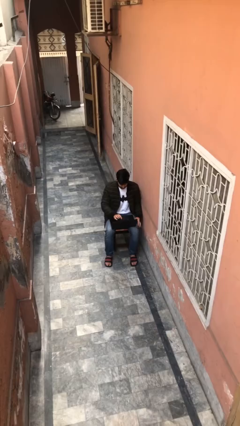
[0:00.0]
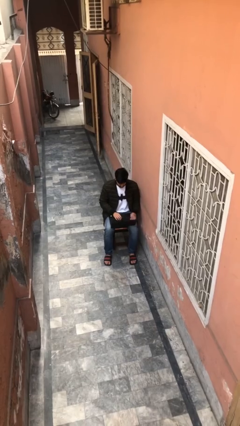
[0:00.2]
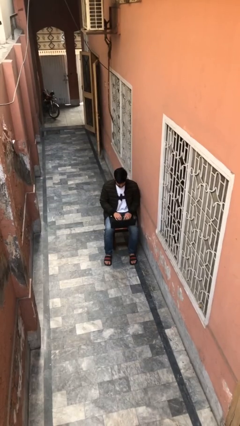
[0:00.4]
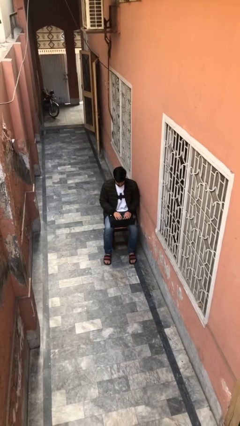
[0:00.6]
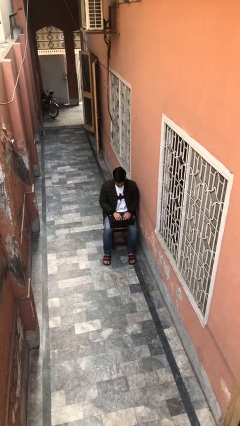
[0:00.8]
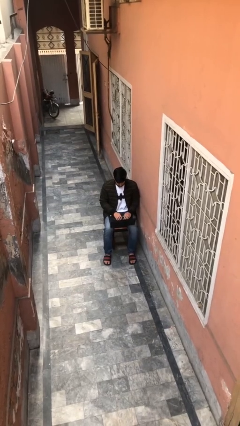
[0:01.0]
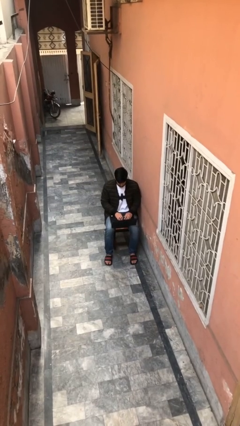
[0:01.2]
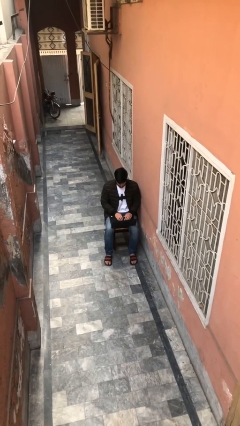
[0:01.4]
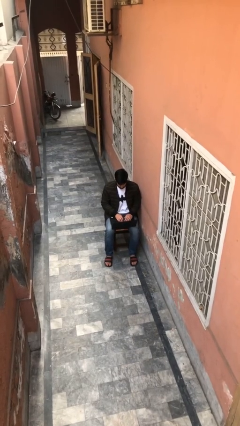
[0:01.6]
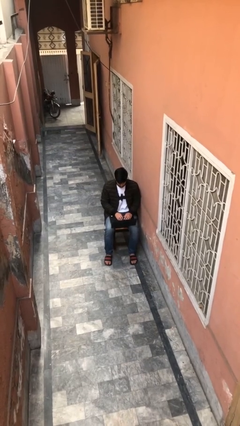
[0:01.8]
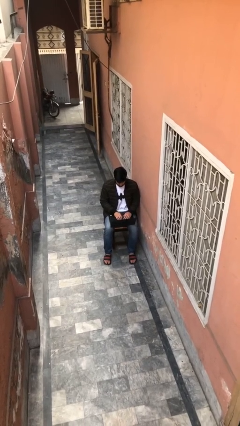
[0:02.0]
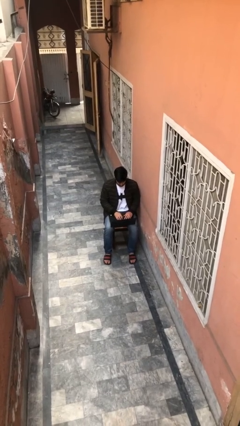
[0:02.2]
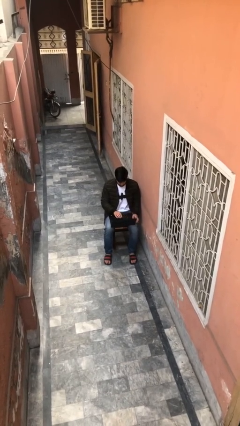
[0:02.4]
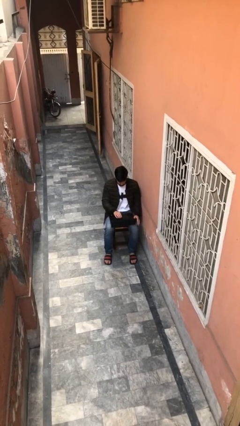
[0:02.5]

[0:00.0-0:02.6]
person interacts with laptop

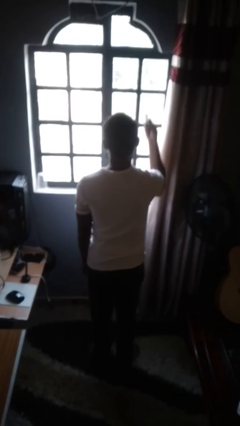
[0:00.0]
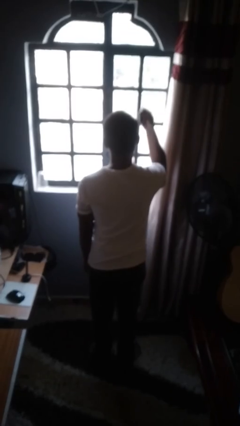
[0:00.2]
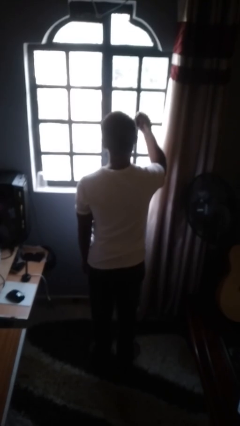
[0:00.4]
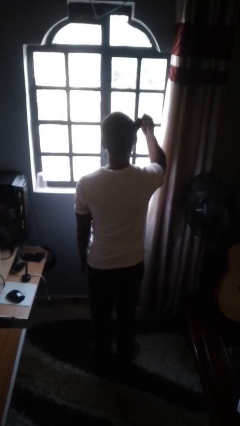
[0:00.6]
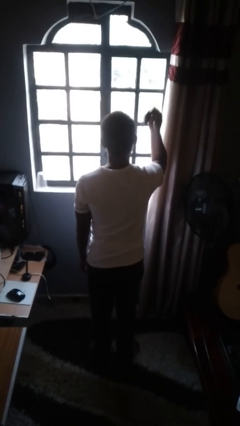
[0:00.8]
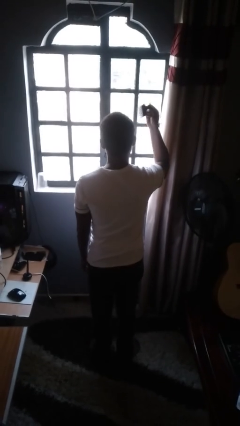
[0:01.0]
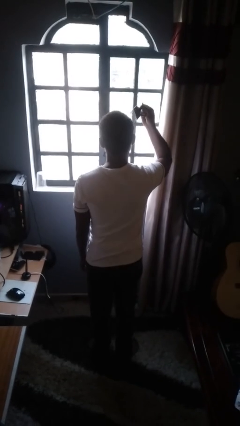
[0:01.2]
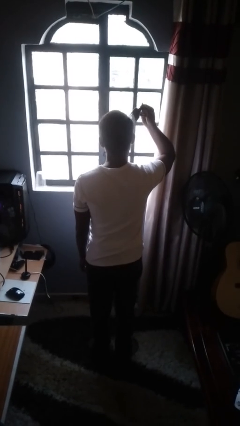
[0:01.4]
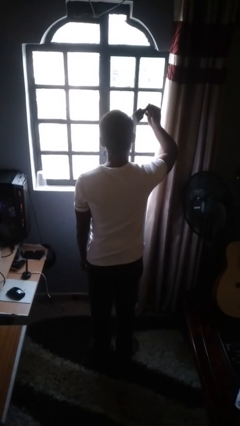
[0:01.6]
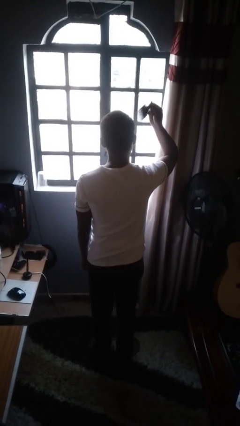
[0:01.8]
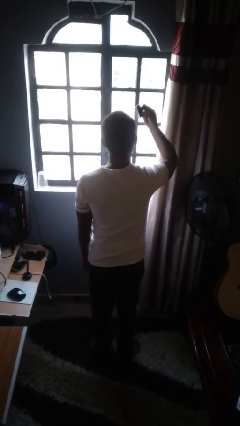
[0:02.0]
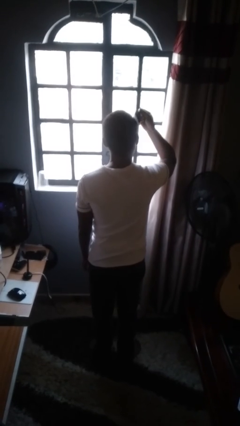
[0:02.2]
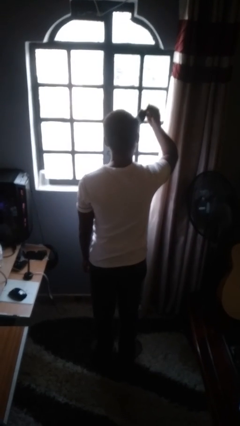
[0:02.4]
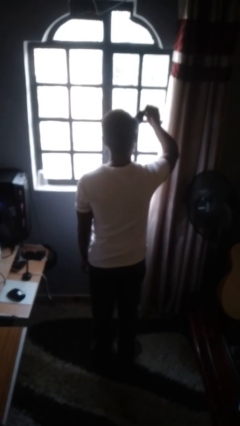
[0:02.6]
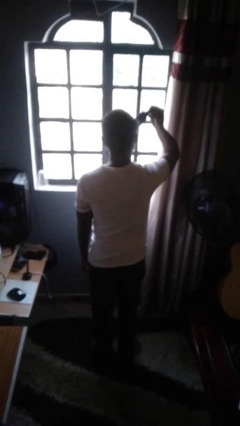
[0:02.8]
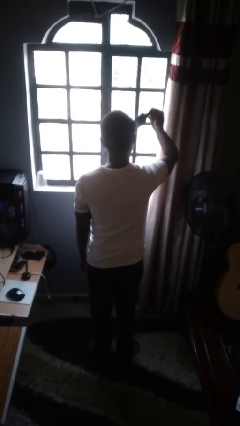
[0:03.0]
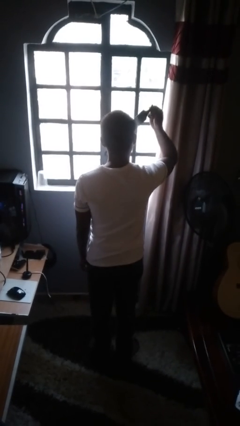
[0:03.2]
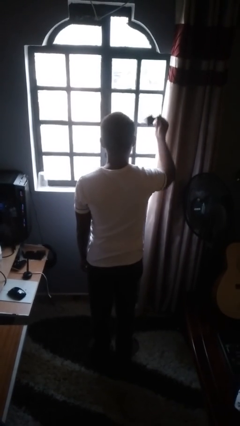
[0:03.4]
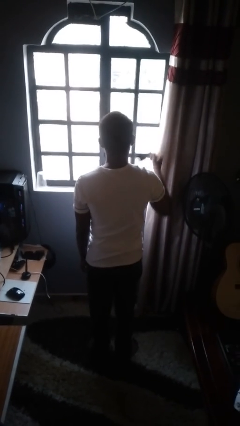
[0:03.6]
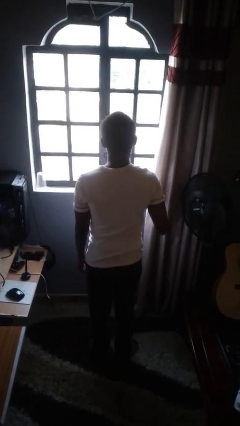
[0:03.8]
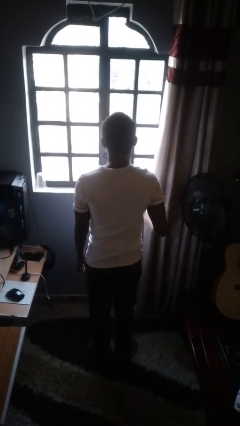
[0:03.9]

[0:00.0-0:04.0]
person brushes hair

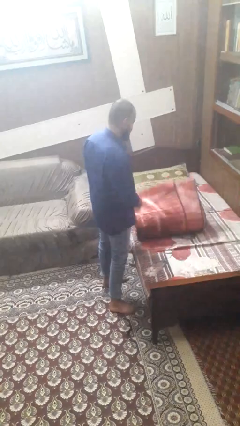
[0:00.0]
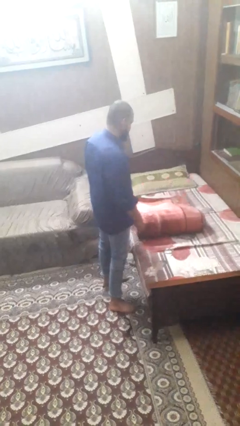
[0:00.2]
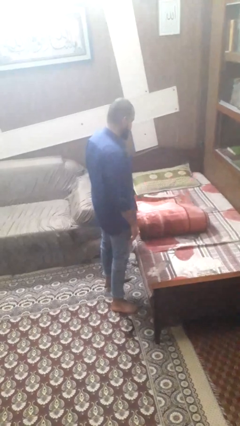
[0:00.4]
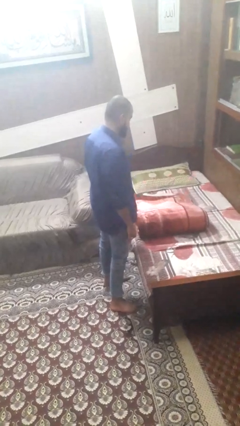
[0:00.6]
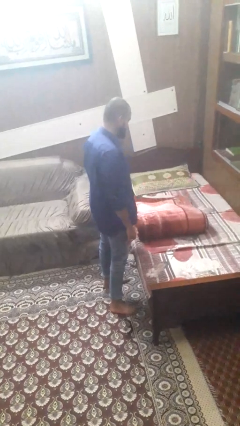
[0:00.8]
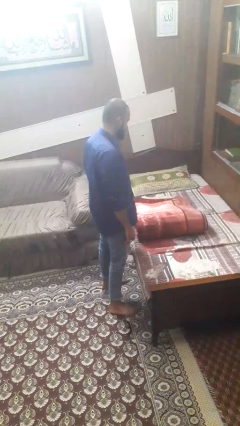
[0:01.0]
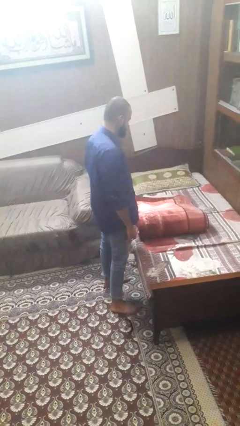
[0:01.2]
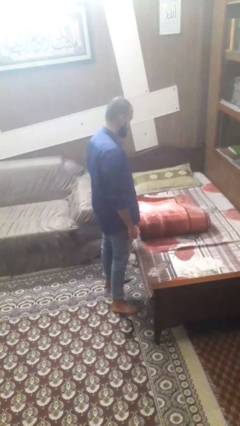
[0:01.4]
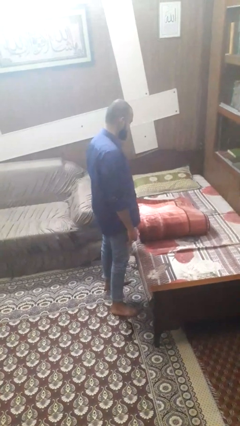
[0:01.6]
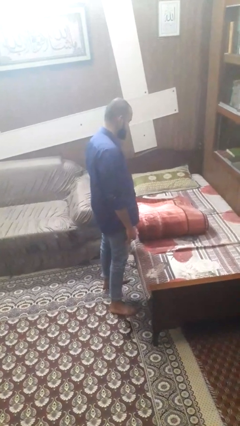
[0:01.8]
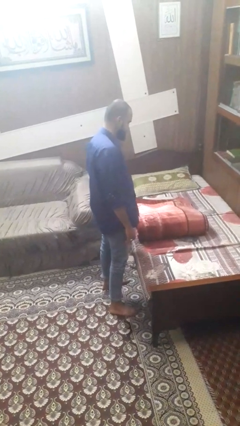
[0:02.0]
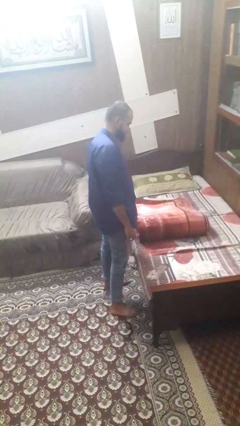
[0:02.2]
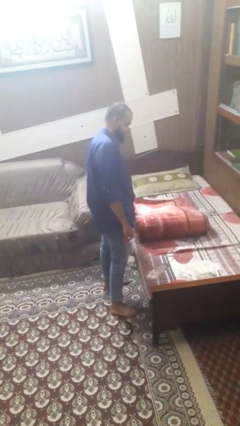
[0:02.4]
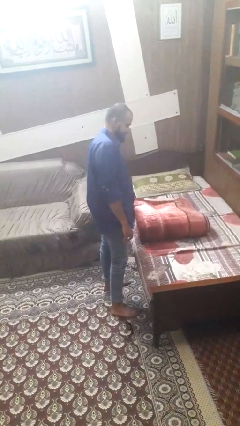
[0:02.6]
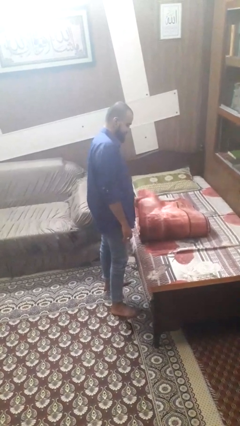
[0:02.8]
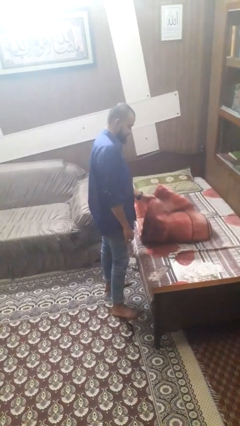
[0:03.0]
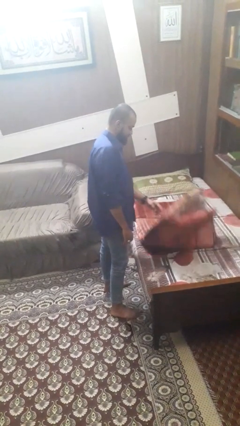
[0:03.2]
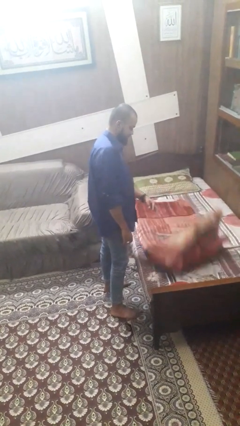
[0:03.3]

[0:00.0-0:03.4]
person folds blanket

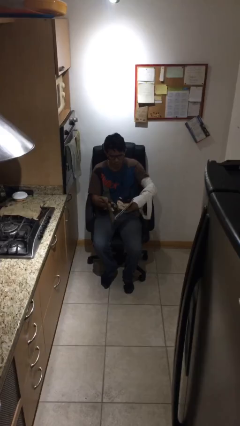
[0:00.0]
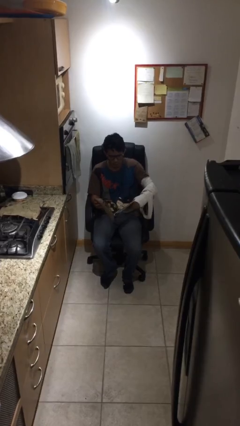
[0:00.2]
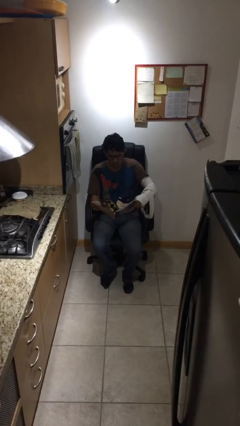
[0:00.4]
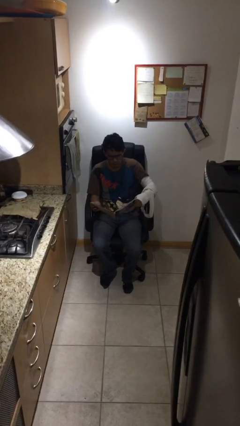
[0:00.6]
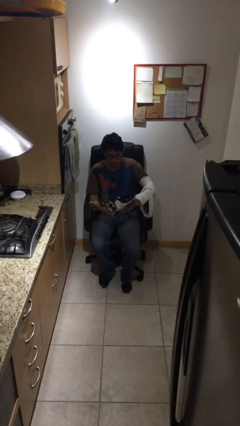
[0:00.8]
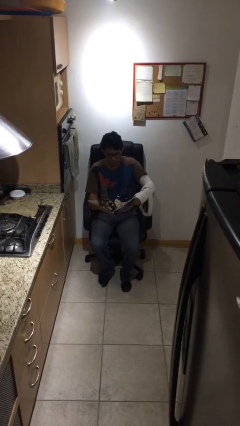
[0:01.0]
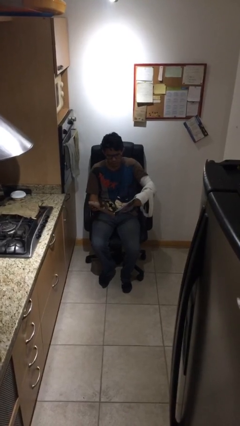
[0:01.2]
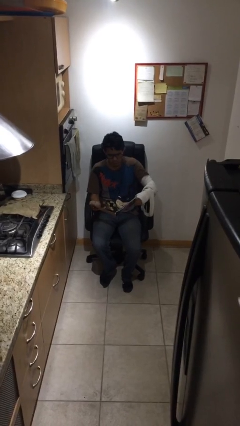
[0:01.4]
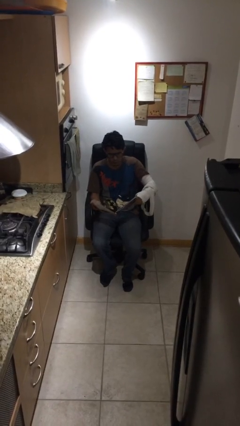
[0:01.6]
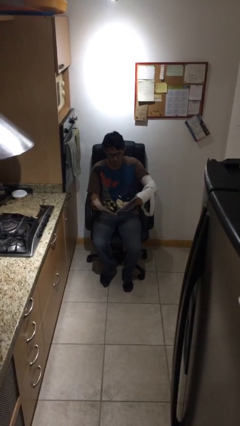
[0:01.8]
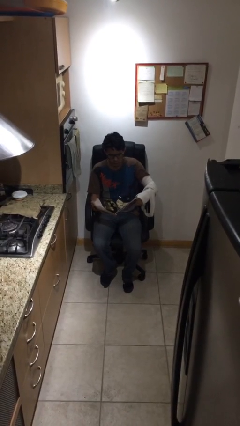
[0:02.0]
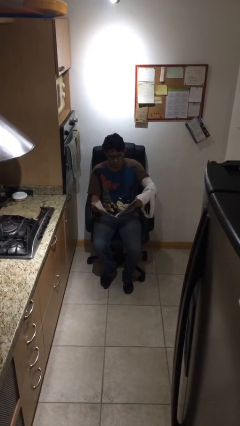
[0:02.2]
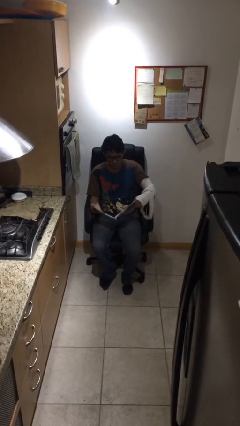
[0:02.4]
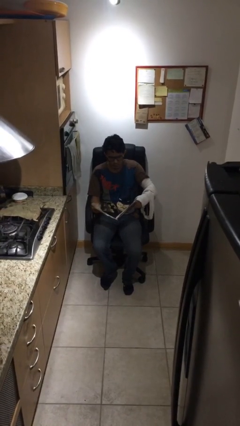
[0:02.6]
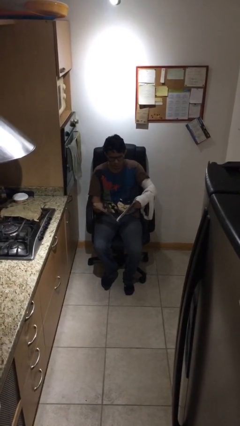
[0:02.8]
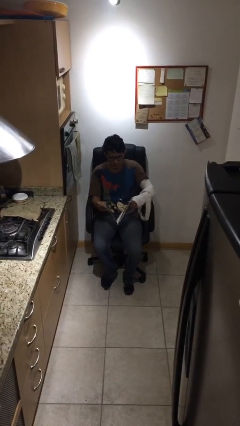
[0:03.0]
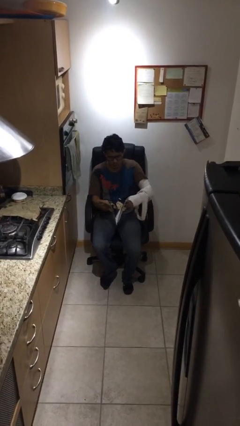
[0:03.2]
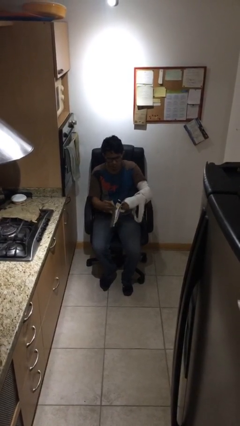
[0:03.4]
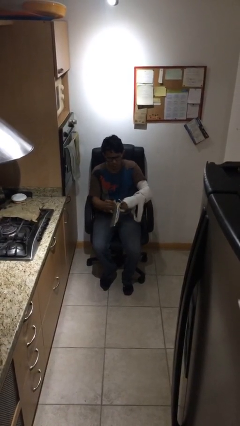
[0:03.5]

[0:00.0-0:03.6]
person reads document

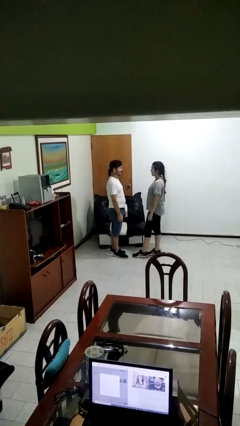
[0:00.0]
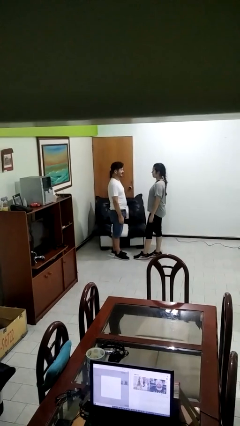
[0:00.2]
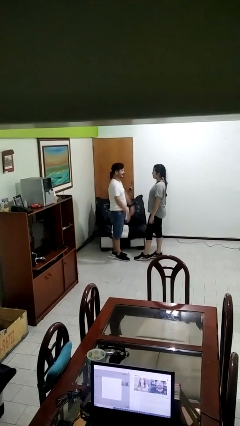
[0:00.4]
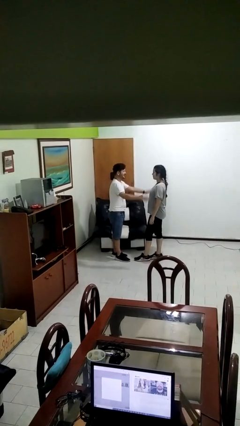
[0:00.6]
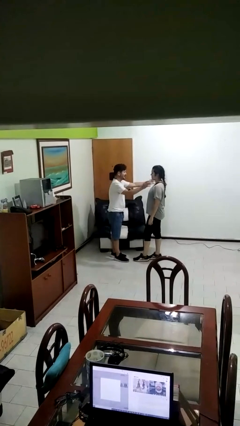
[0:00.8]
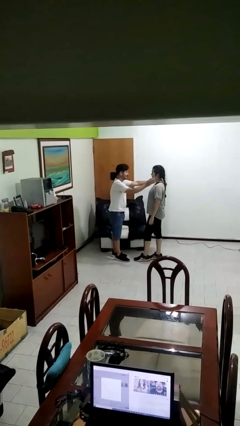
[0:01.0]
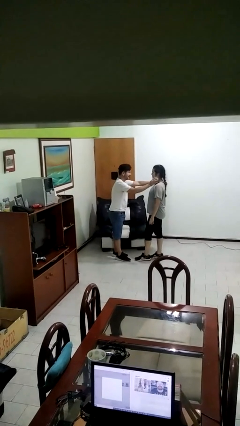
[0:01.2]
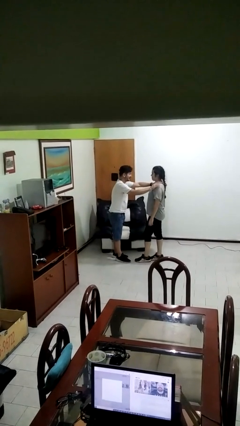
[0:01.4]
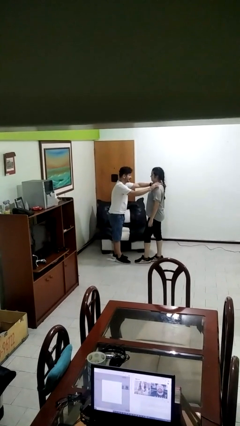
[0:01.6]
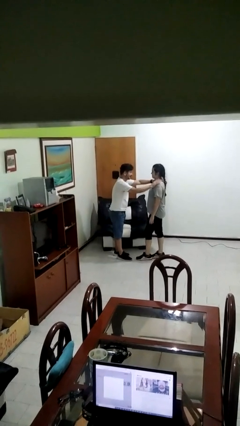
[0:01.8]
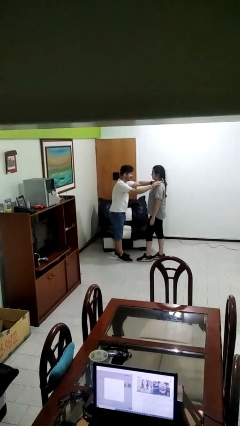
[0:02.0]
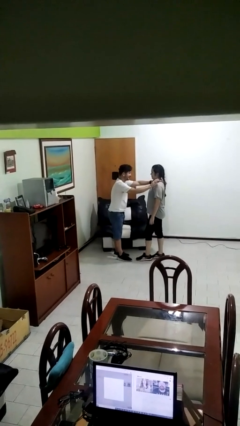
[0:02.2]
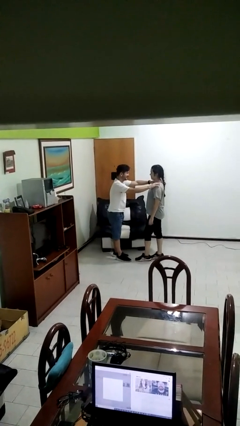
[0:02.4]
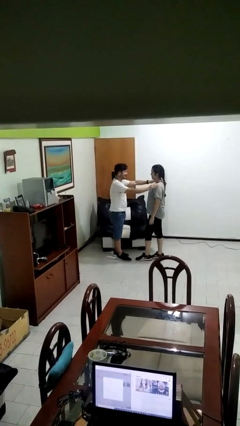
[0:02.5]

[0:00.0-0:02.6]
person pounds shoulders of person

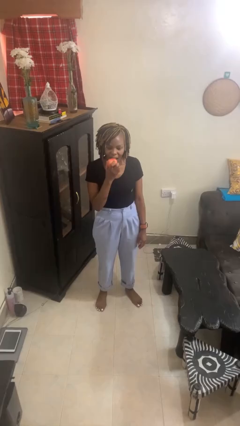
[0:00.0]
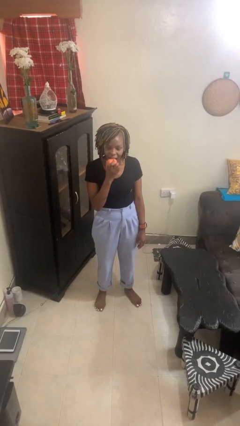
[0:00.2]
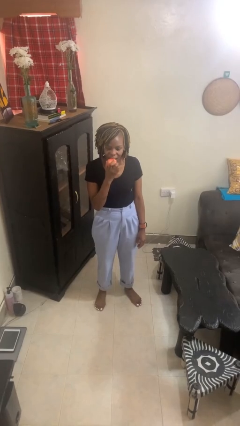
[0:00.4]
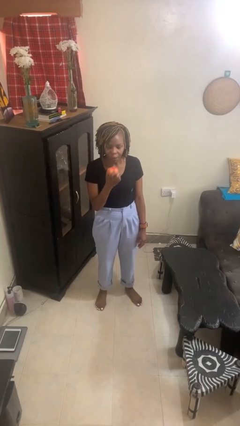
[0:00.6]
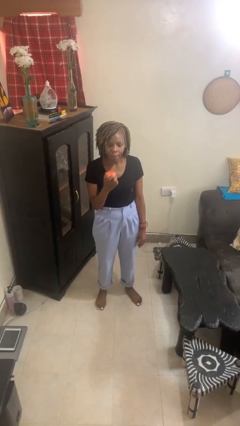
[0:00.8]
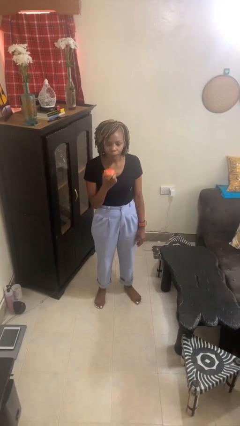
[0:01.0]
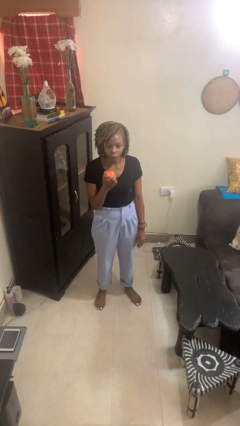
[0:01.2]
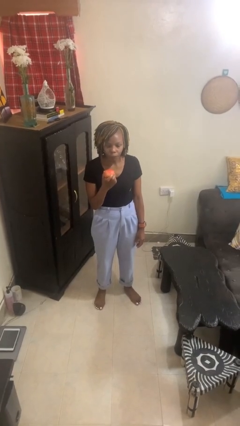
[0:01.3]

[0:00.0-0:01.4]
person eats apple
